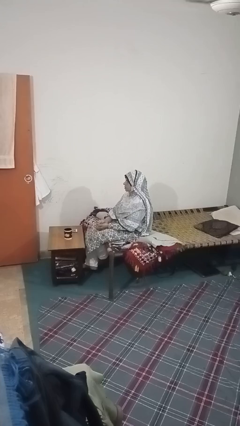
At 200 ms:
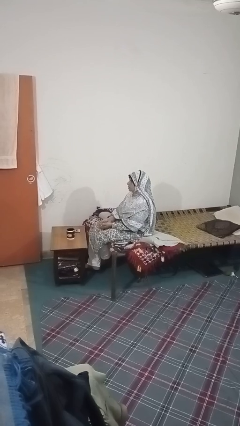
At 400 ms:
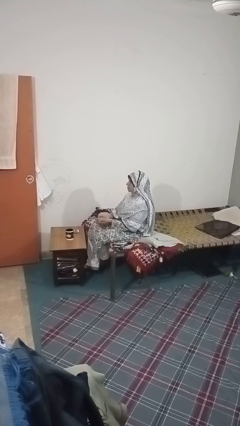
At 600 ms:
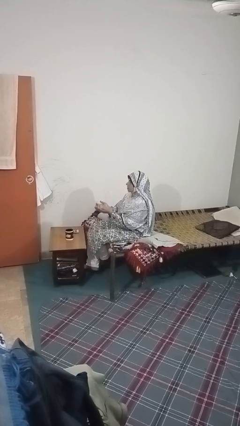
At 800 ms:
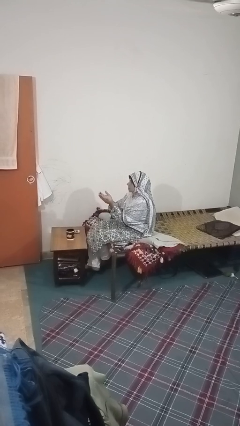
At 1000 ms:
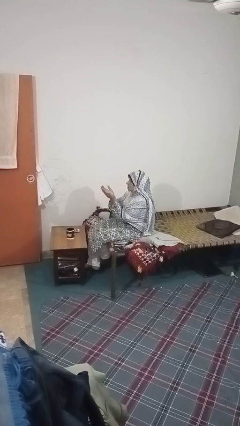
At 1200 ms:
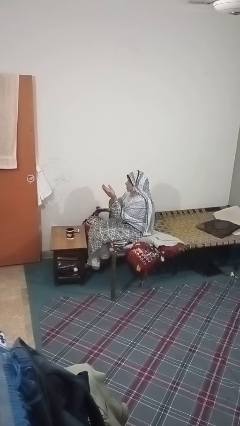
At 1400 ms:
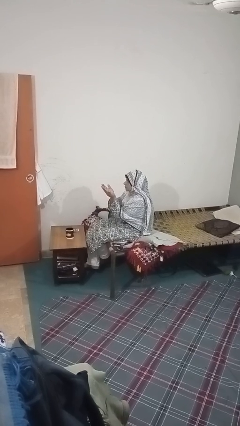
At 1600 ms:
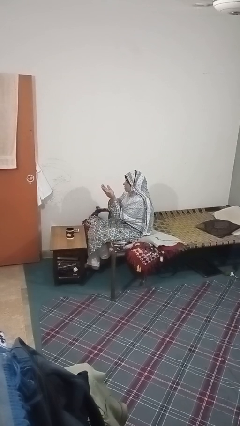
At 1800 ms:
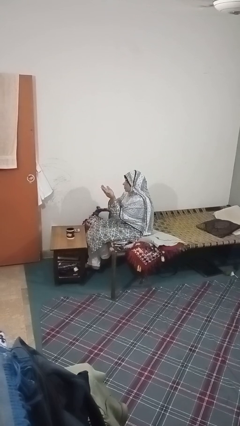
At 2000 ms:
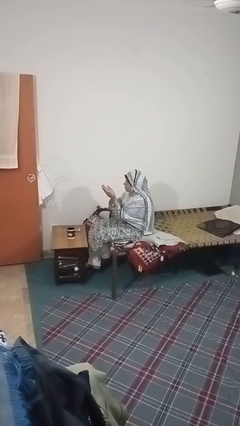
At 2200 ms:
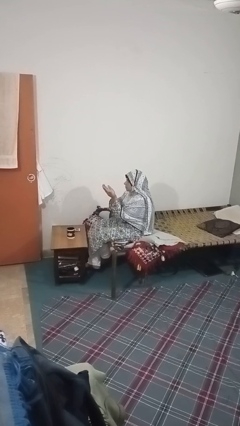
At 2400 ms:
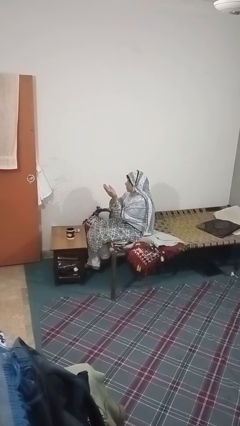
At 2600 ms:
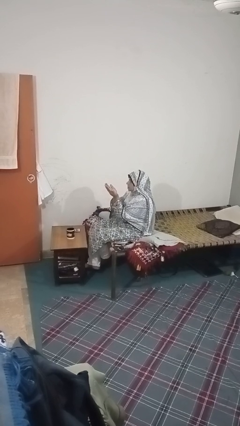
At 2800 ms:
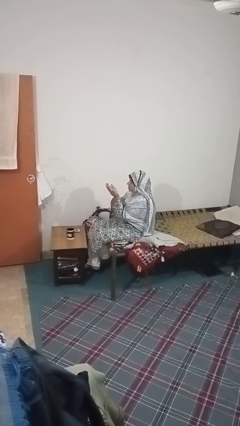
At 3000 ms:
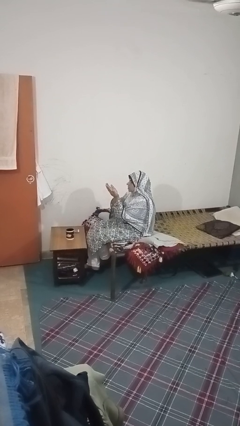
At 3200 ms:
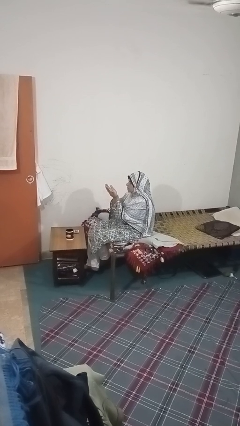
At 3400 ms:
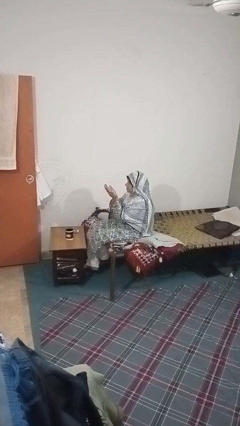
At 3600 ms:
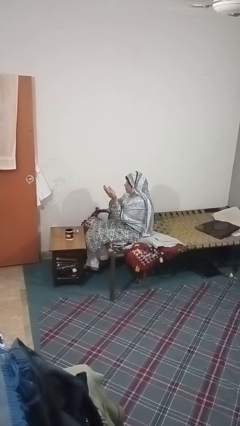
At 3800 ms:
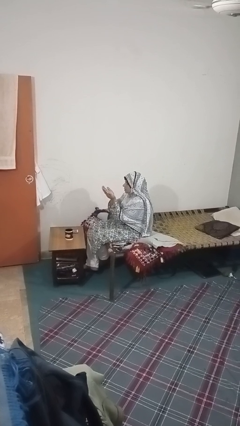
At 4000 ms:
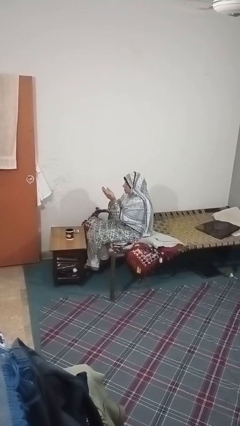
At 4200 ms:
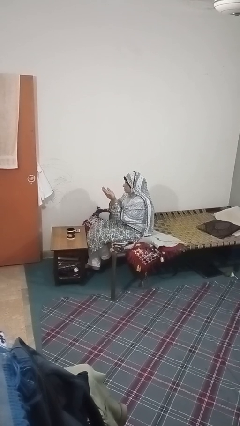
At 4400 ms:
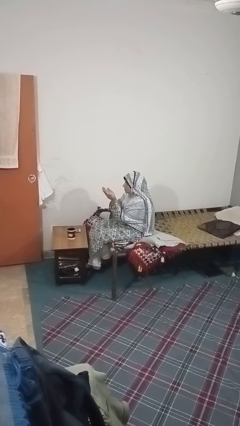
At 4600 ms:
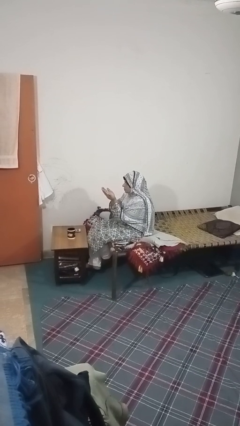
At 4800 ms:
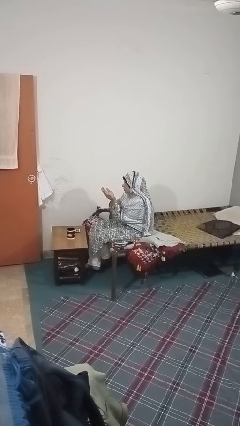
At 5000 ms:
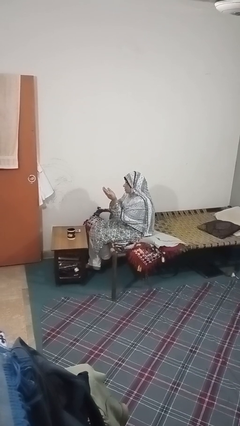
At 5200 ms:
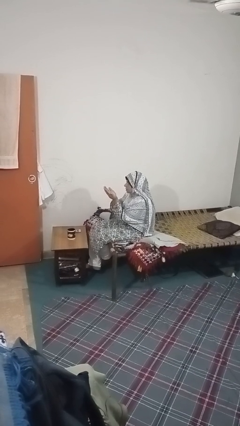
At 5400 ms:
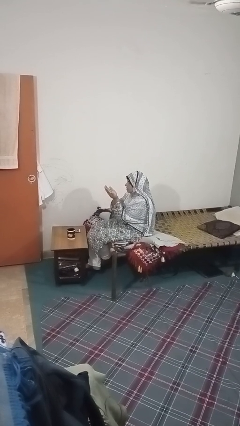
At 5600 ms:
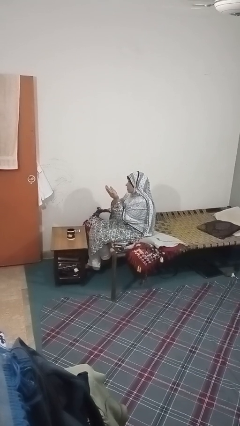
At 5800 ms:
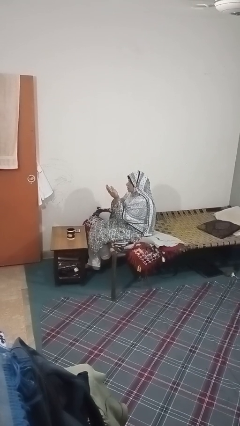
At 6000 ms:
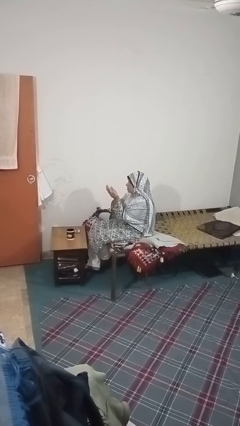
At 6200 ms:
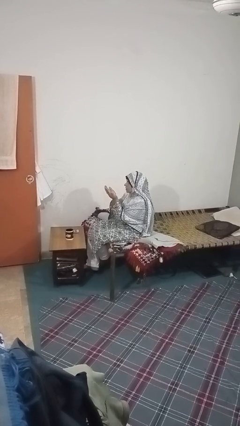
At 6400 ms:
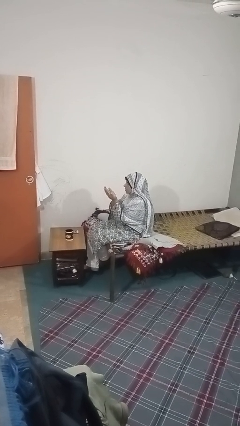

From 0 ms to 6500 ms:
person prays

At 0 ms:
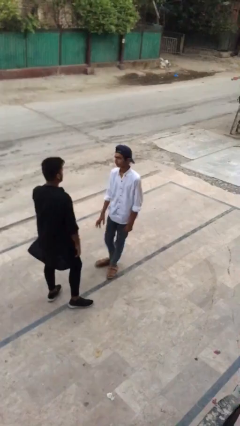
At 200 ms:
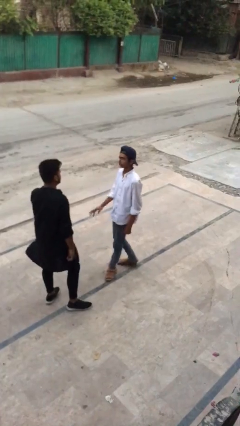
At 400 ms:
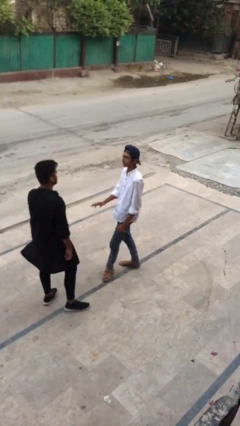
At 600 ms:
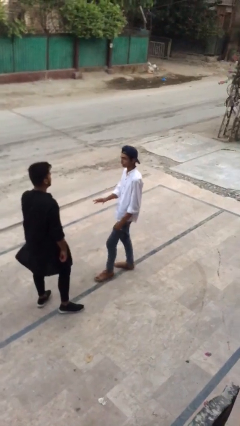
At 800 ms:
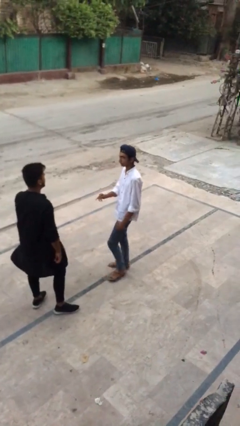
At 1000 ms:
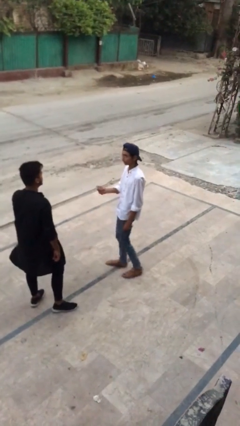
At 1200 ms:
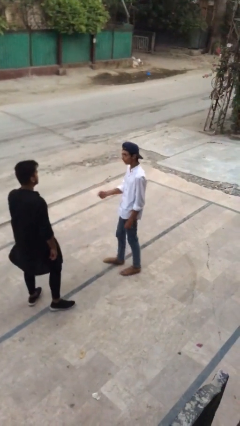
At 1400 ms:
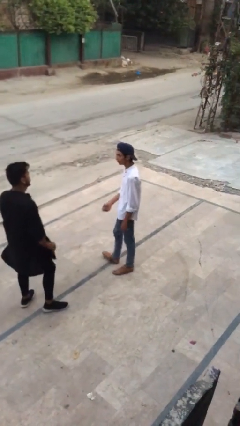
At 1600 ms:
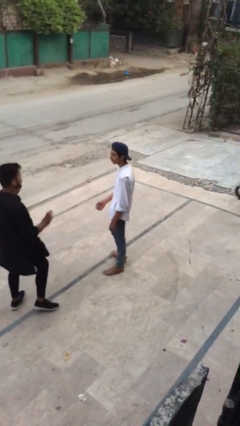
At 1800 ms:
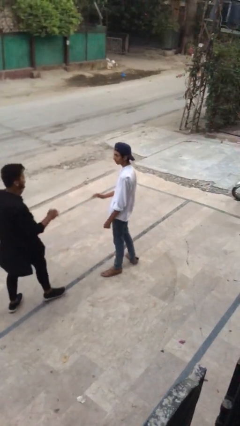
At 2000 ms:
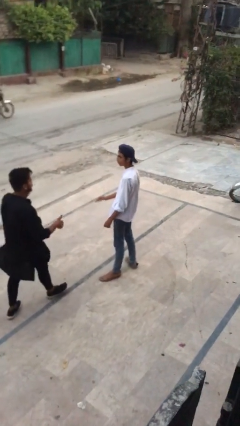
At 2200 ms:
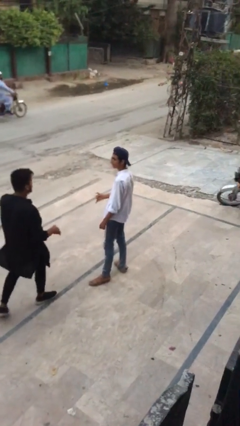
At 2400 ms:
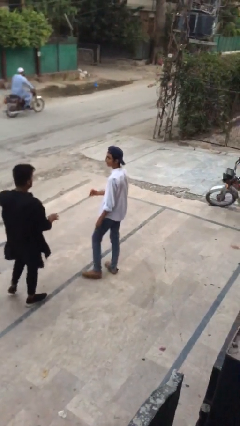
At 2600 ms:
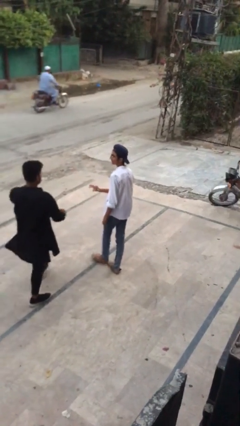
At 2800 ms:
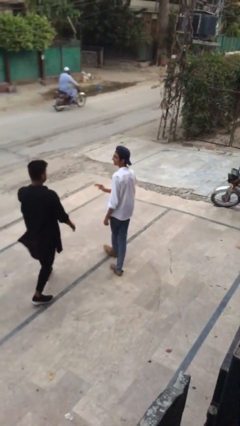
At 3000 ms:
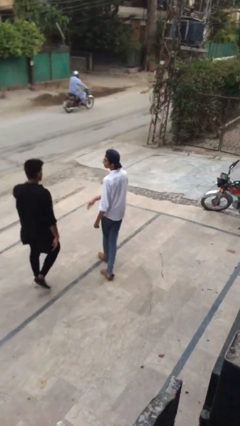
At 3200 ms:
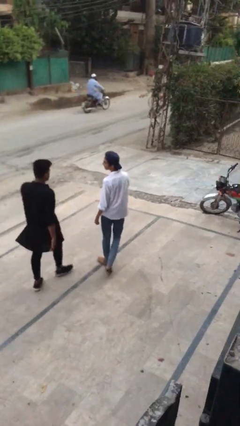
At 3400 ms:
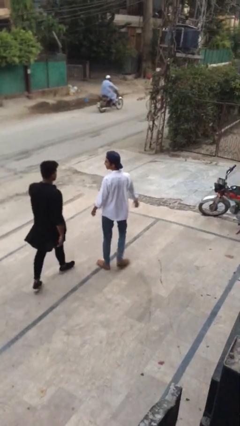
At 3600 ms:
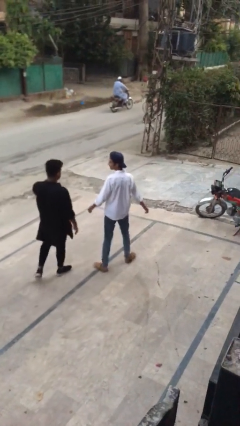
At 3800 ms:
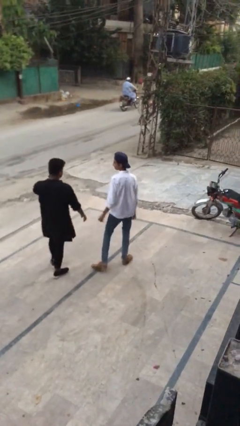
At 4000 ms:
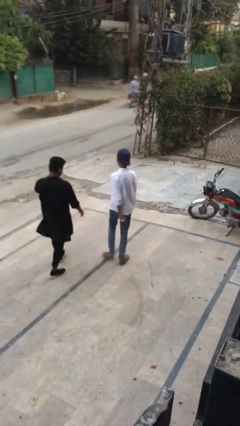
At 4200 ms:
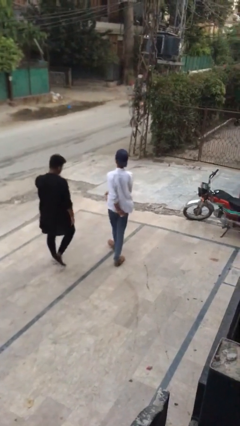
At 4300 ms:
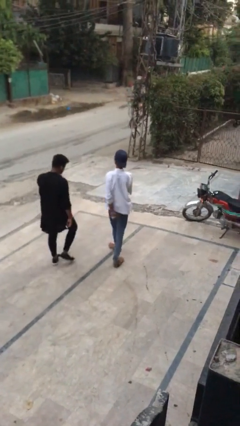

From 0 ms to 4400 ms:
person talks to person

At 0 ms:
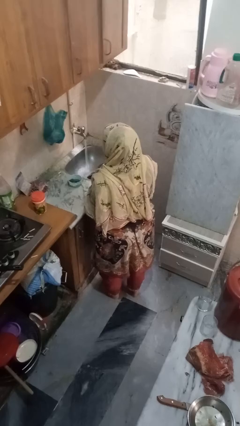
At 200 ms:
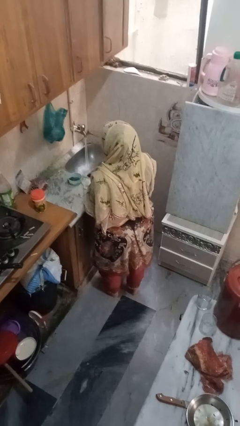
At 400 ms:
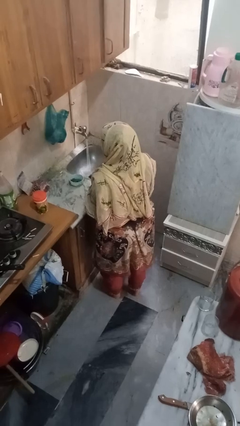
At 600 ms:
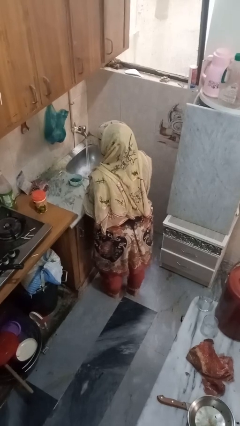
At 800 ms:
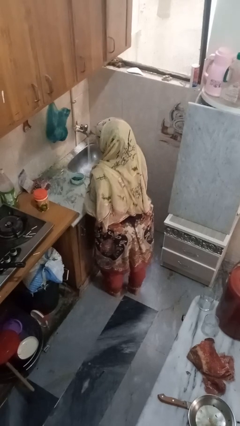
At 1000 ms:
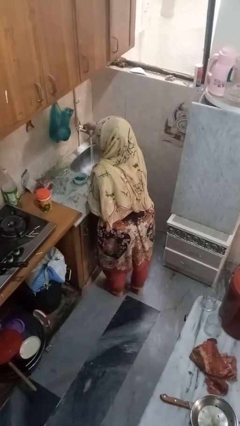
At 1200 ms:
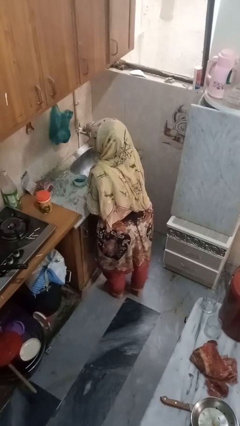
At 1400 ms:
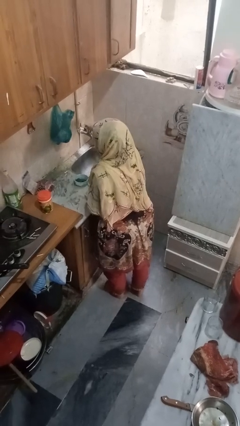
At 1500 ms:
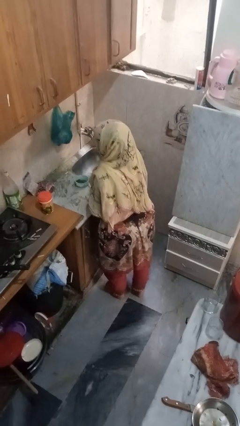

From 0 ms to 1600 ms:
person turns off faucet

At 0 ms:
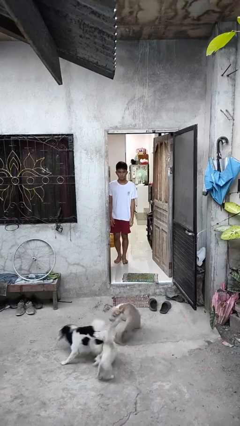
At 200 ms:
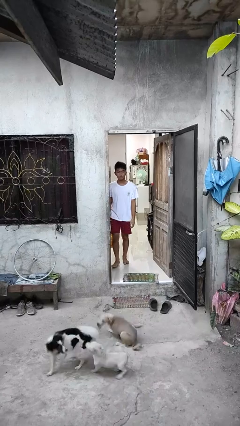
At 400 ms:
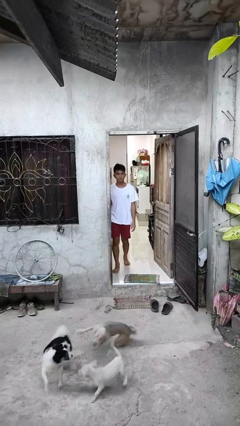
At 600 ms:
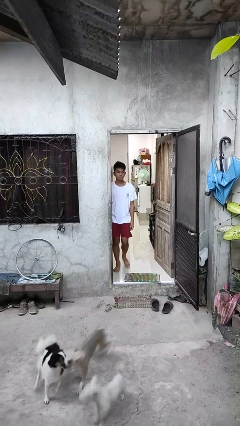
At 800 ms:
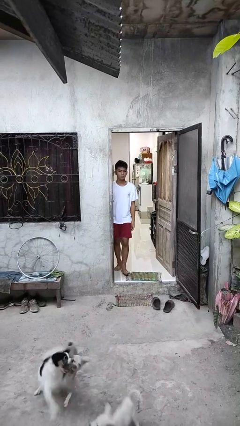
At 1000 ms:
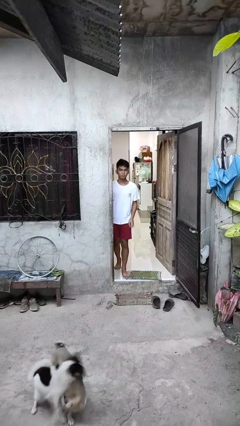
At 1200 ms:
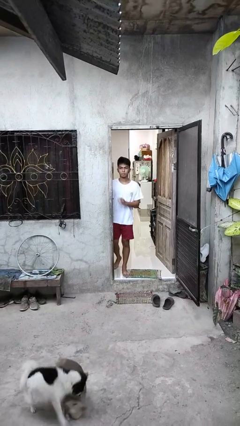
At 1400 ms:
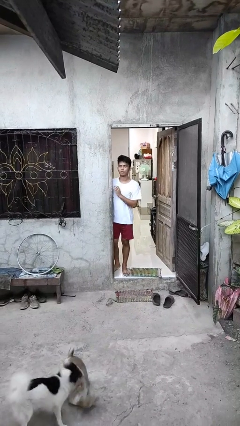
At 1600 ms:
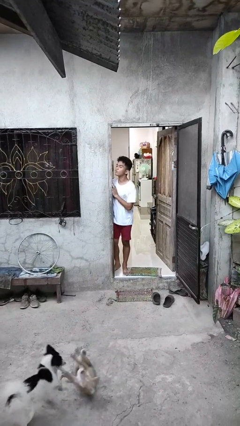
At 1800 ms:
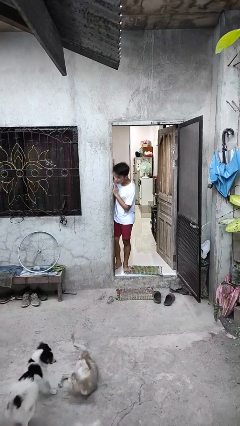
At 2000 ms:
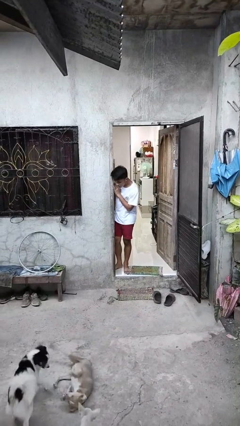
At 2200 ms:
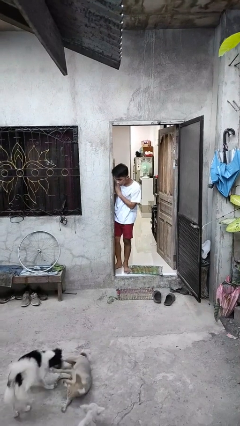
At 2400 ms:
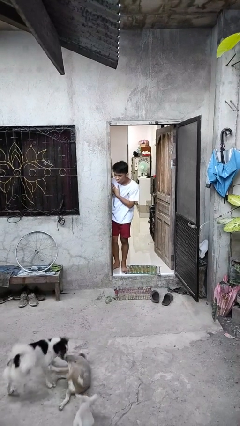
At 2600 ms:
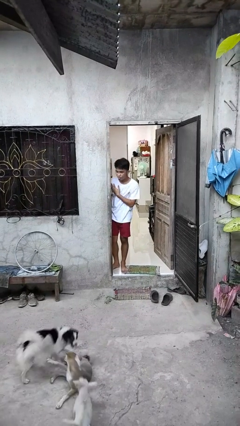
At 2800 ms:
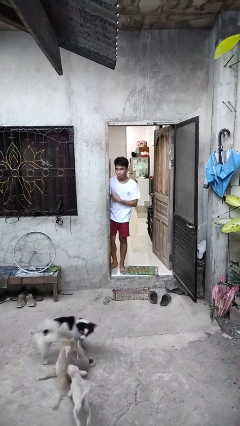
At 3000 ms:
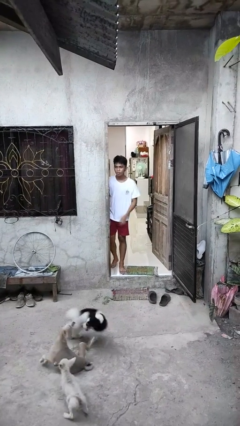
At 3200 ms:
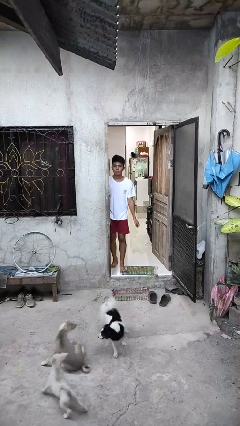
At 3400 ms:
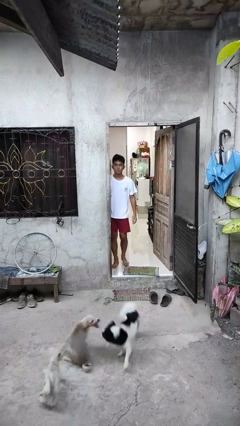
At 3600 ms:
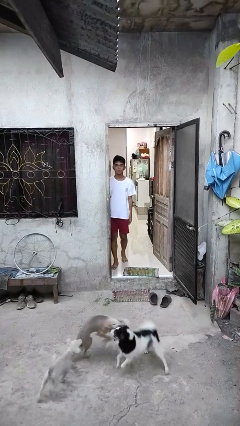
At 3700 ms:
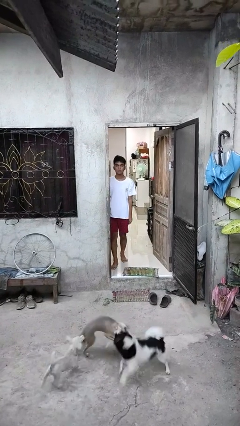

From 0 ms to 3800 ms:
person bumps into wall

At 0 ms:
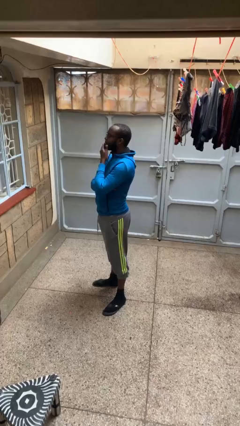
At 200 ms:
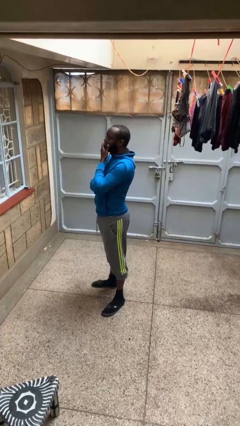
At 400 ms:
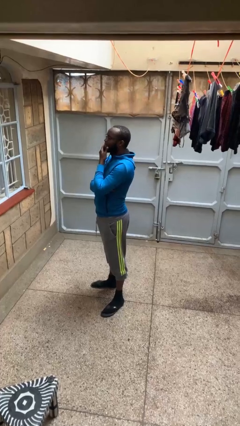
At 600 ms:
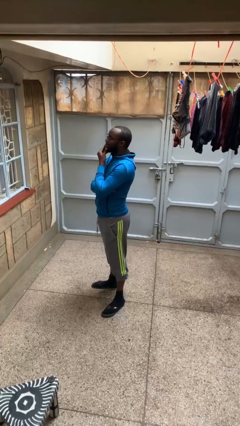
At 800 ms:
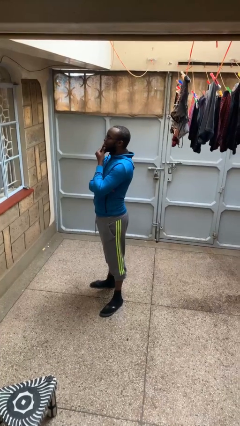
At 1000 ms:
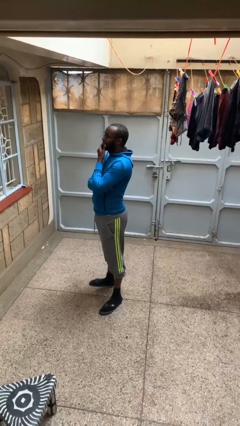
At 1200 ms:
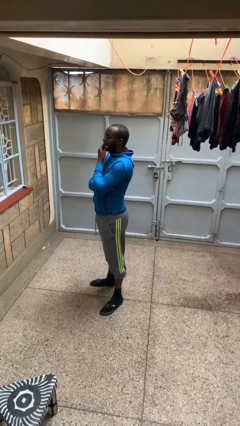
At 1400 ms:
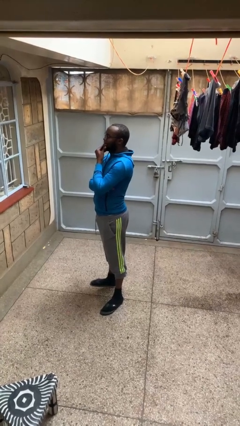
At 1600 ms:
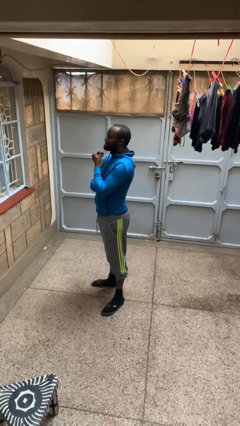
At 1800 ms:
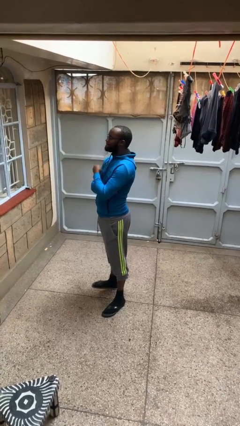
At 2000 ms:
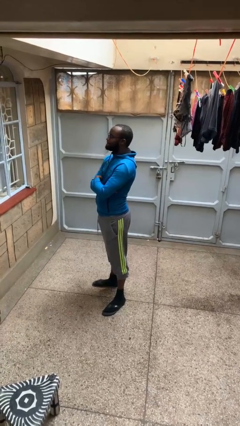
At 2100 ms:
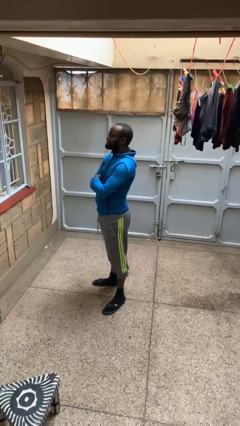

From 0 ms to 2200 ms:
person strokes chin
